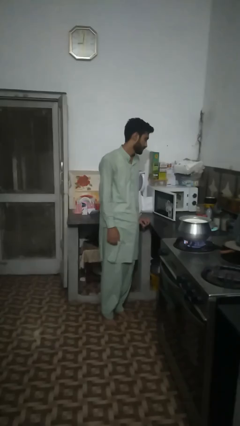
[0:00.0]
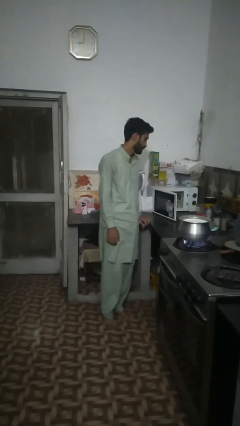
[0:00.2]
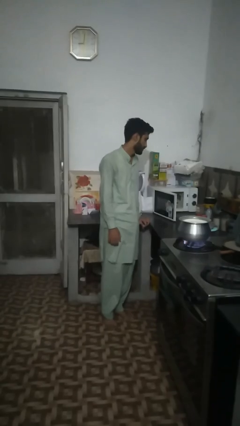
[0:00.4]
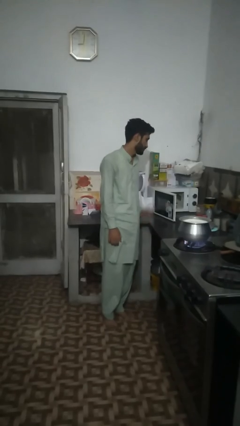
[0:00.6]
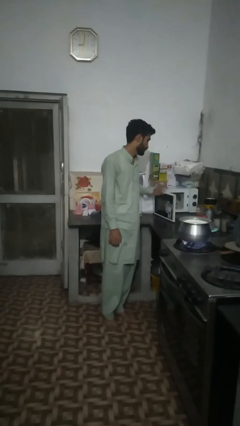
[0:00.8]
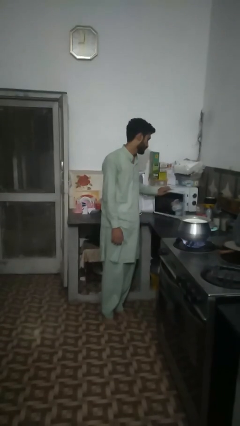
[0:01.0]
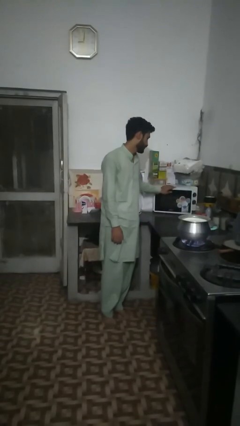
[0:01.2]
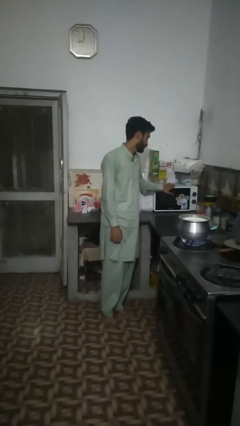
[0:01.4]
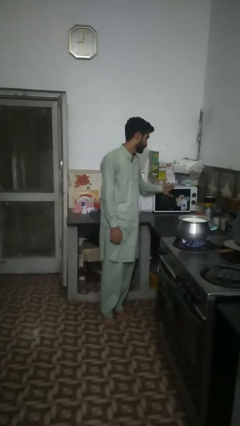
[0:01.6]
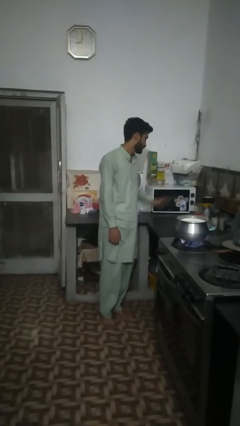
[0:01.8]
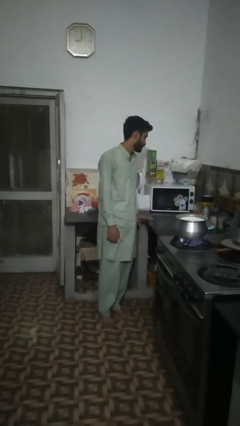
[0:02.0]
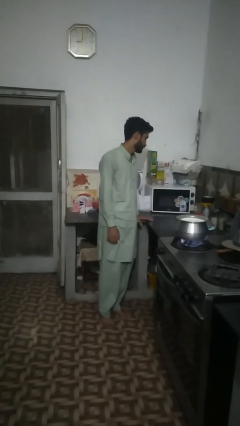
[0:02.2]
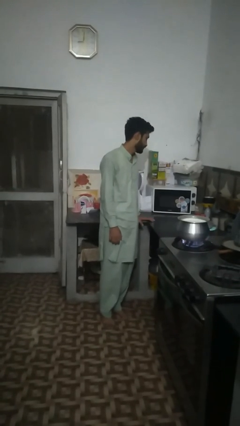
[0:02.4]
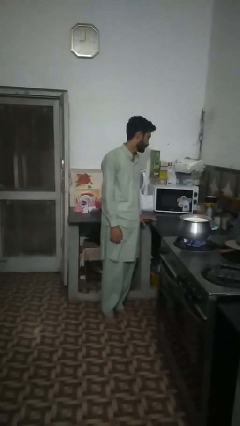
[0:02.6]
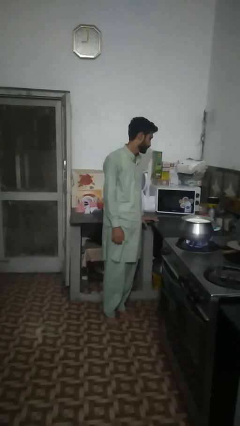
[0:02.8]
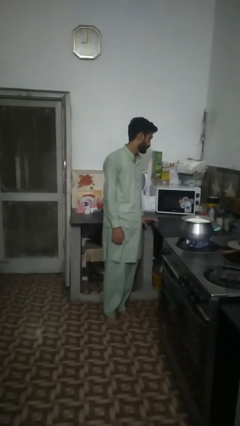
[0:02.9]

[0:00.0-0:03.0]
person closes microwave

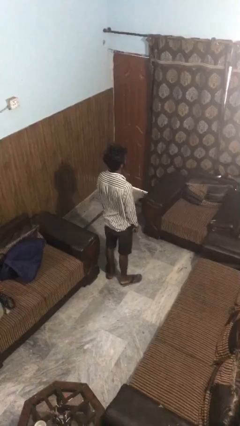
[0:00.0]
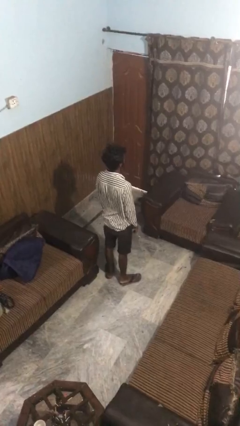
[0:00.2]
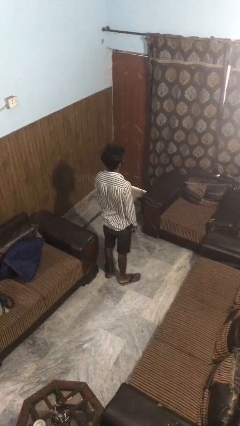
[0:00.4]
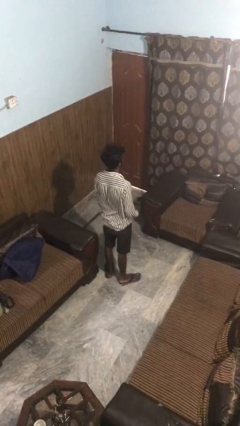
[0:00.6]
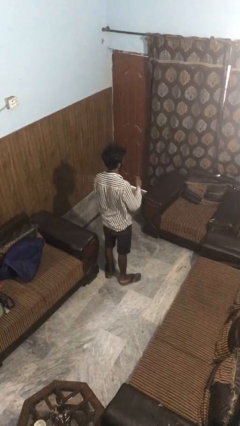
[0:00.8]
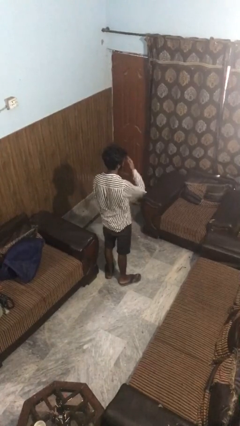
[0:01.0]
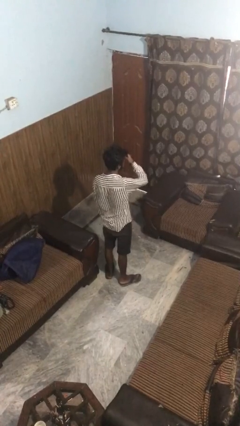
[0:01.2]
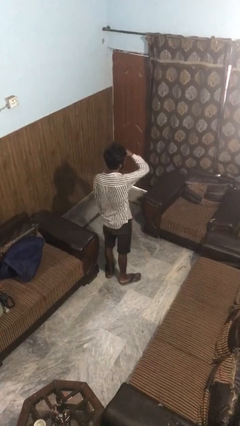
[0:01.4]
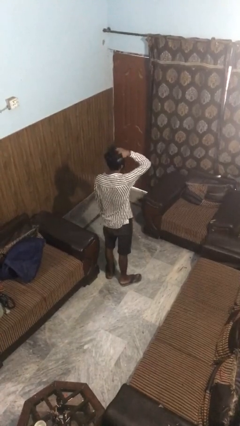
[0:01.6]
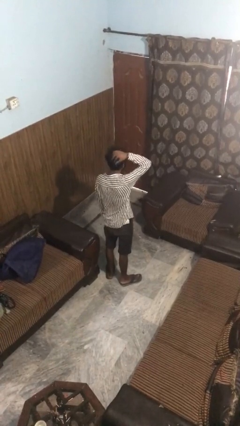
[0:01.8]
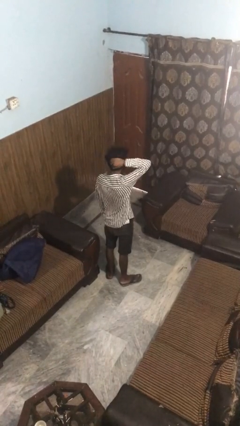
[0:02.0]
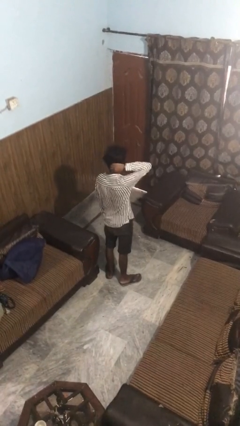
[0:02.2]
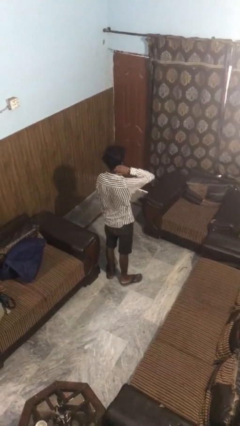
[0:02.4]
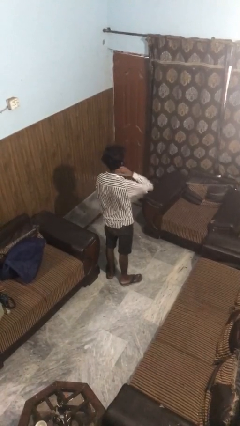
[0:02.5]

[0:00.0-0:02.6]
person strokes hair

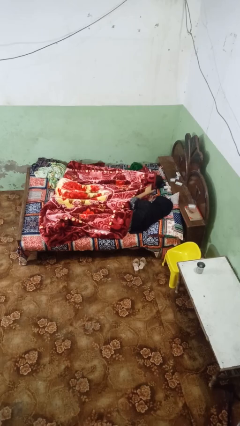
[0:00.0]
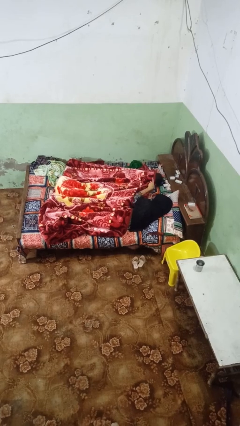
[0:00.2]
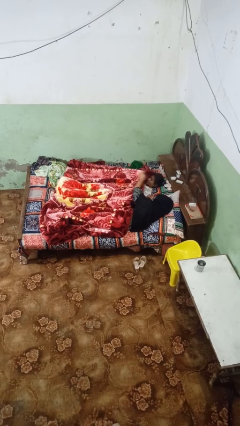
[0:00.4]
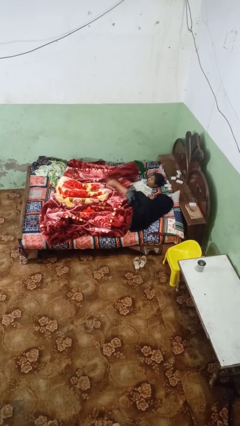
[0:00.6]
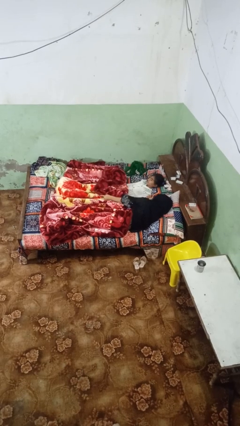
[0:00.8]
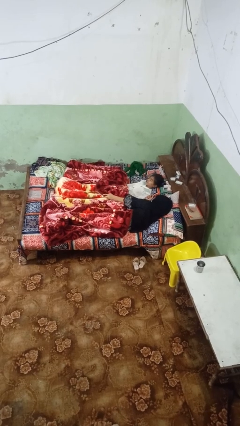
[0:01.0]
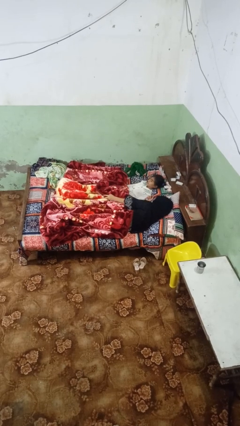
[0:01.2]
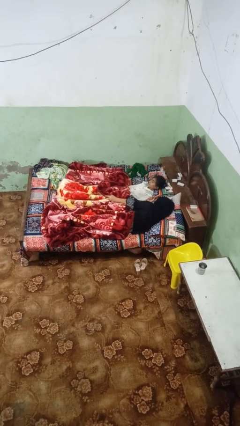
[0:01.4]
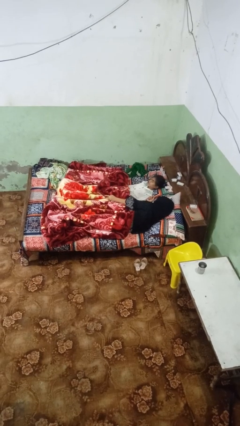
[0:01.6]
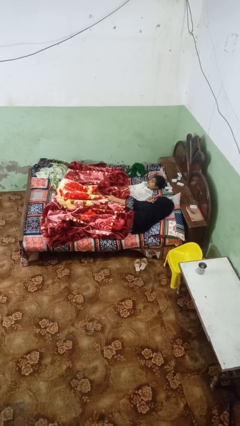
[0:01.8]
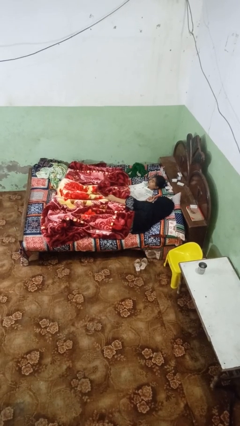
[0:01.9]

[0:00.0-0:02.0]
person uncovers friend with blanket

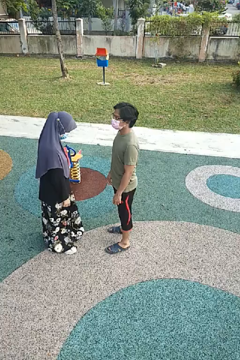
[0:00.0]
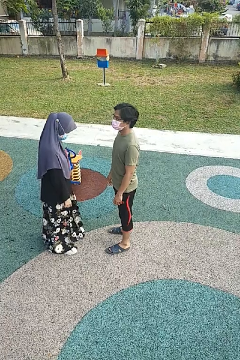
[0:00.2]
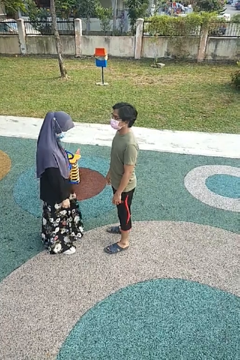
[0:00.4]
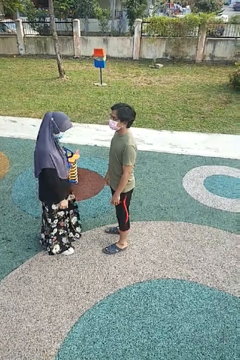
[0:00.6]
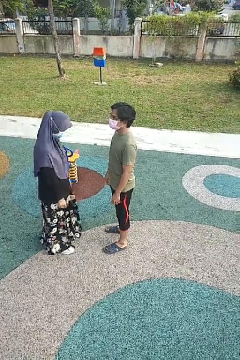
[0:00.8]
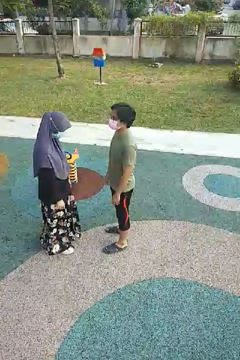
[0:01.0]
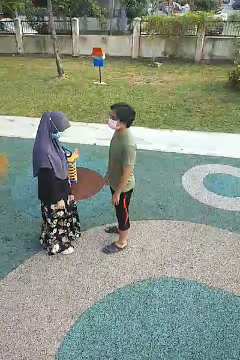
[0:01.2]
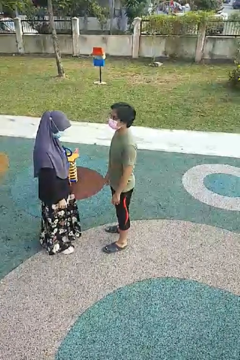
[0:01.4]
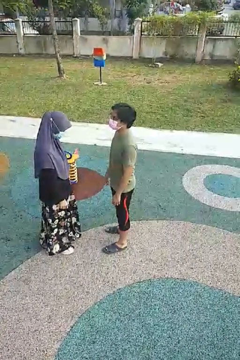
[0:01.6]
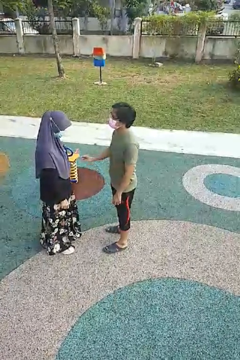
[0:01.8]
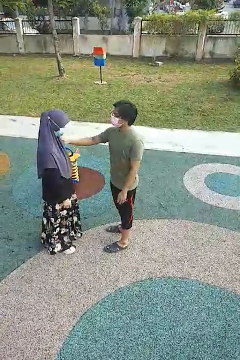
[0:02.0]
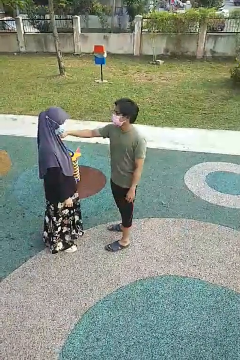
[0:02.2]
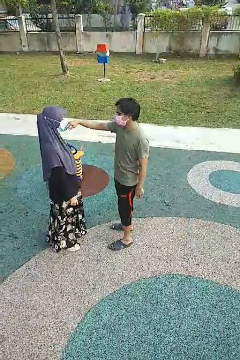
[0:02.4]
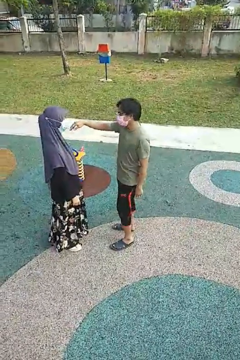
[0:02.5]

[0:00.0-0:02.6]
person shoves person

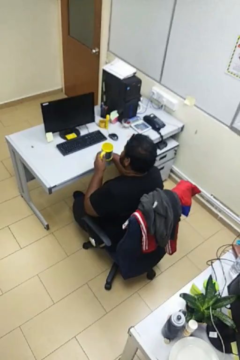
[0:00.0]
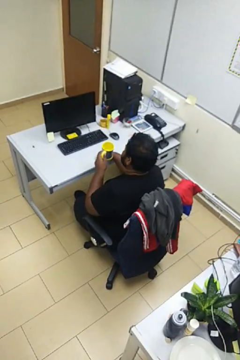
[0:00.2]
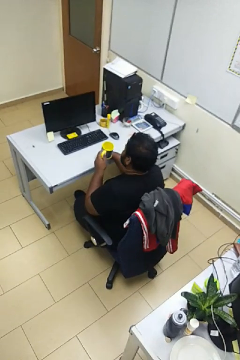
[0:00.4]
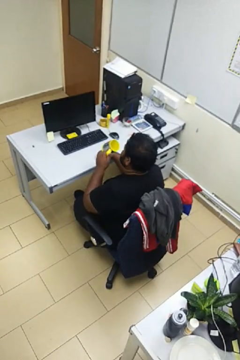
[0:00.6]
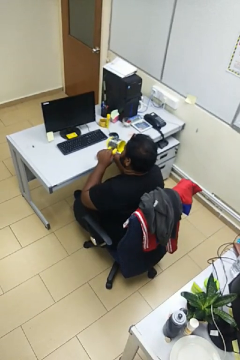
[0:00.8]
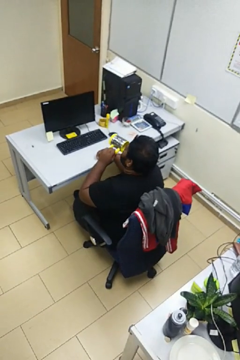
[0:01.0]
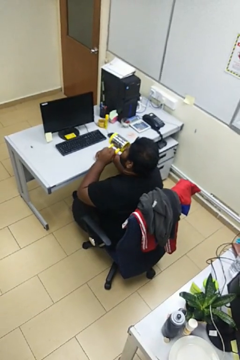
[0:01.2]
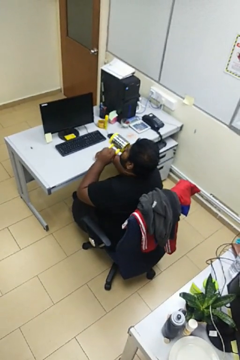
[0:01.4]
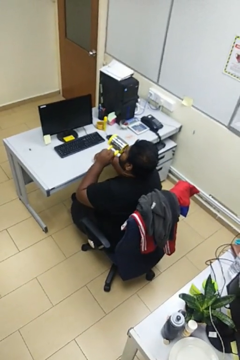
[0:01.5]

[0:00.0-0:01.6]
person drinks from mug

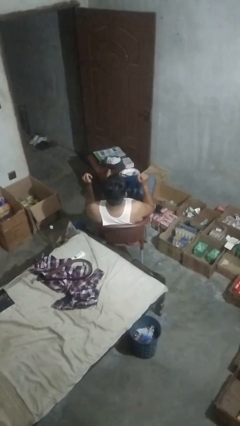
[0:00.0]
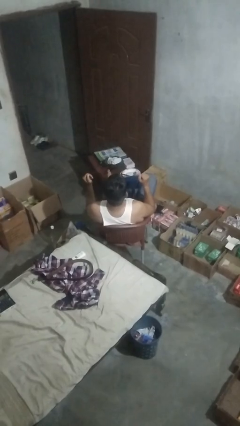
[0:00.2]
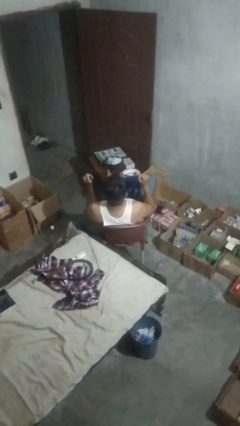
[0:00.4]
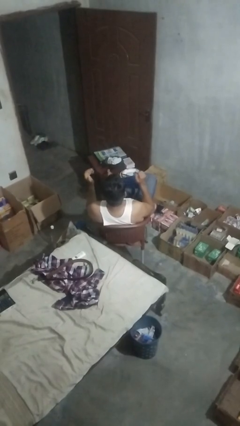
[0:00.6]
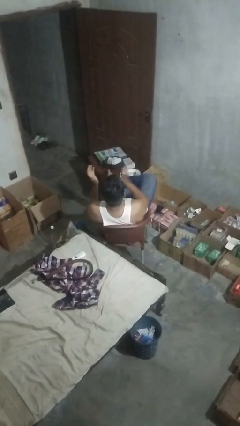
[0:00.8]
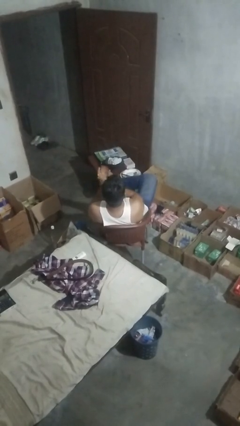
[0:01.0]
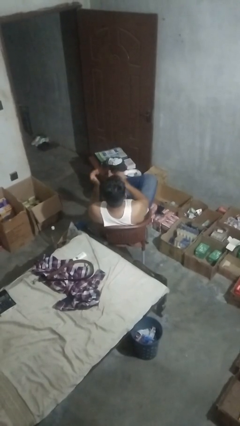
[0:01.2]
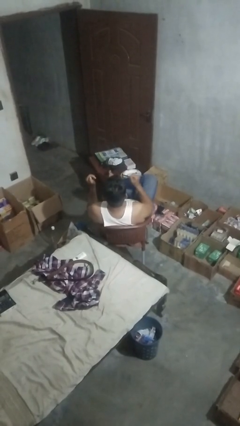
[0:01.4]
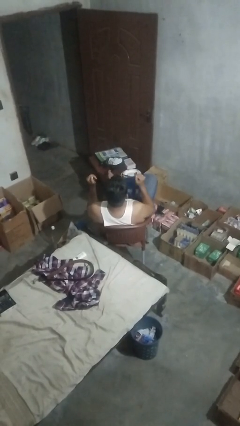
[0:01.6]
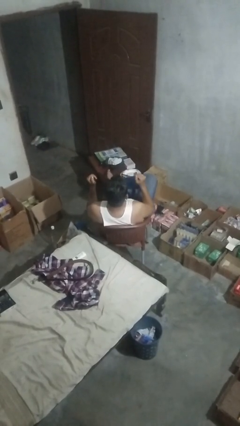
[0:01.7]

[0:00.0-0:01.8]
person claps hands

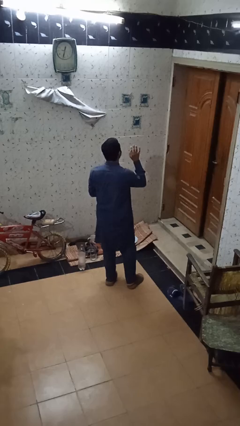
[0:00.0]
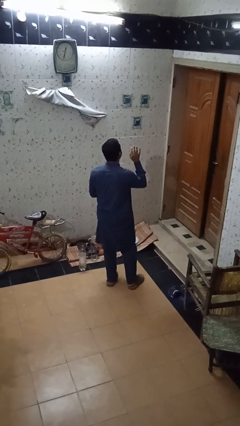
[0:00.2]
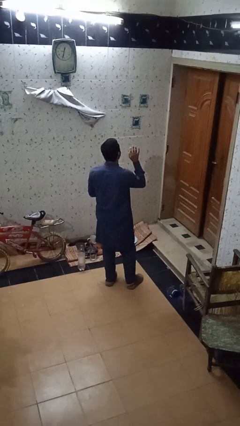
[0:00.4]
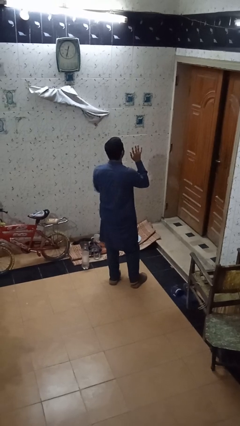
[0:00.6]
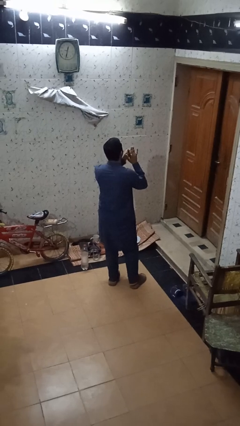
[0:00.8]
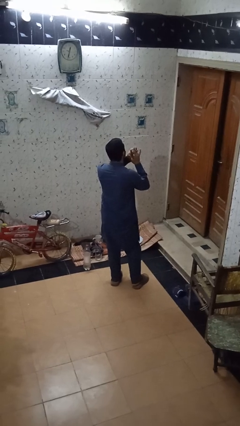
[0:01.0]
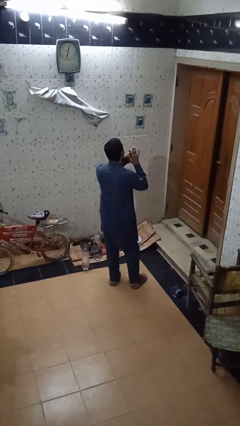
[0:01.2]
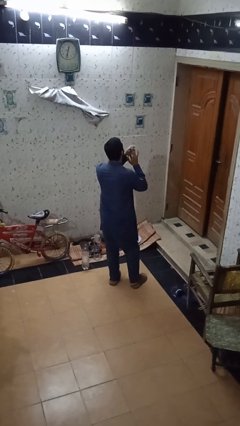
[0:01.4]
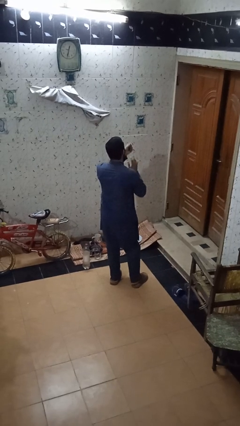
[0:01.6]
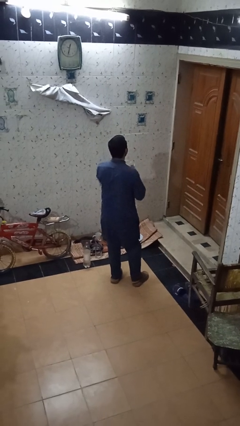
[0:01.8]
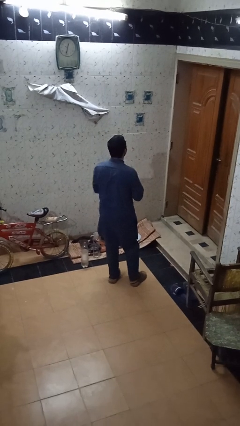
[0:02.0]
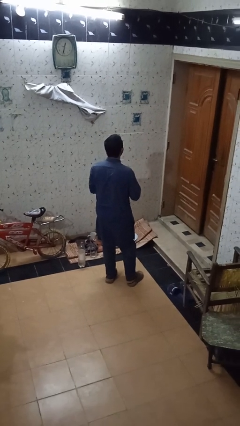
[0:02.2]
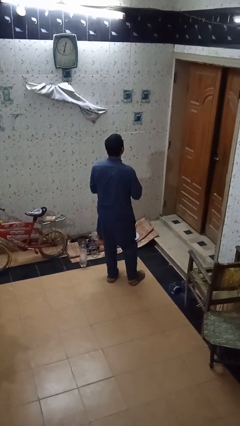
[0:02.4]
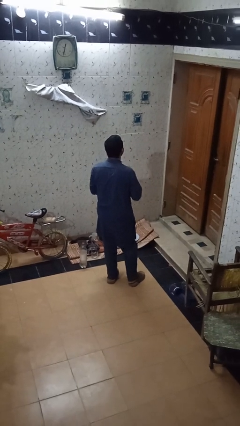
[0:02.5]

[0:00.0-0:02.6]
person takes off ring

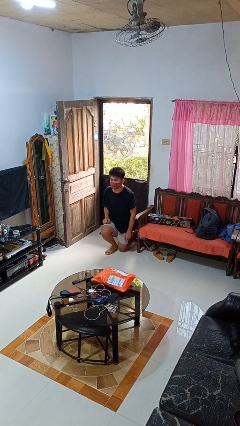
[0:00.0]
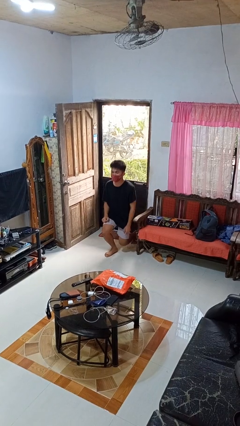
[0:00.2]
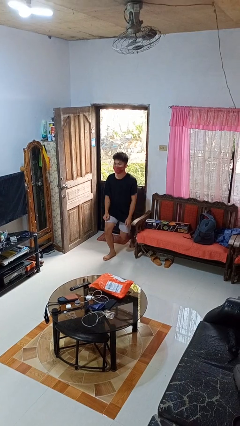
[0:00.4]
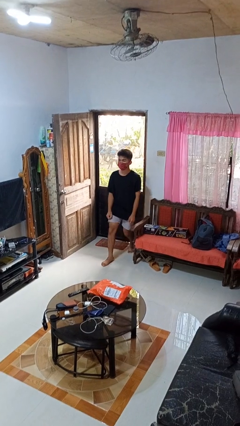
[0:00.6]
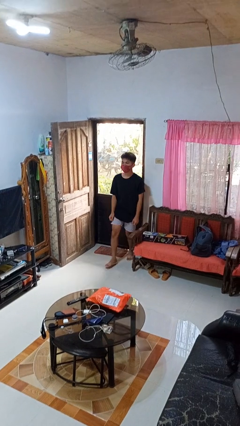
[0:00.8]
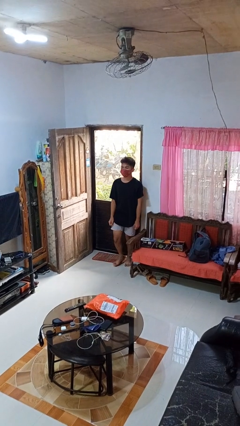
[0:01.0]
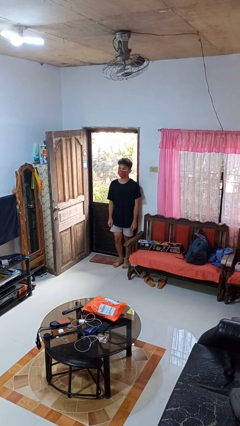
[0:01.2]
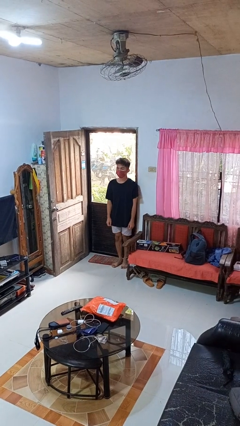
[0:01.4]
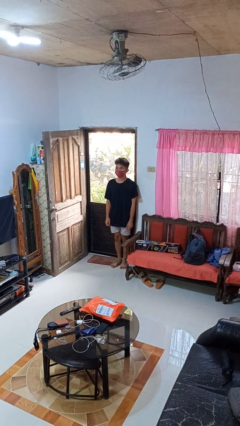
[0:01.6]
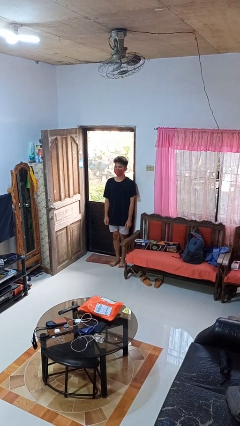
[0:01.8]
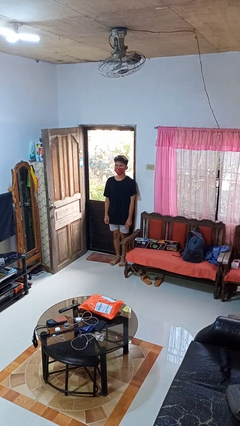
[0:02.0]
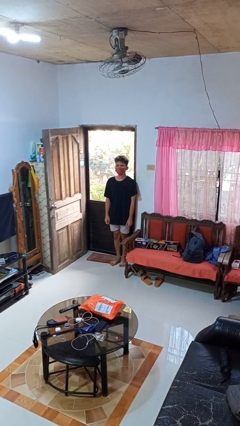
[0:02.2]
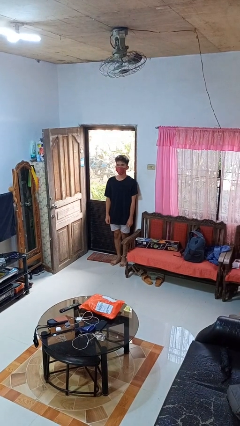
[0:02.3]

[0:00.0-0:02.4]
person stands up from floor
